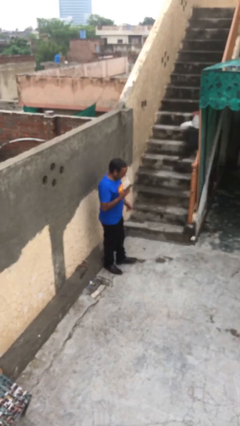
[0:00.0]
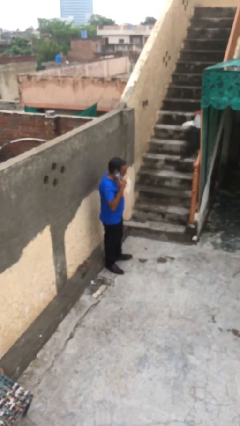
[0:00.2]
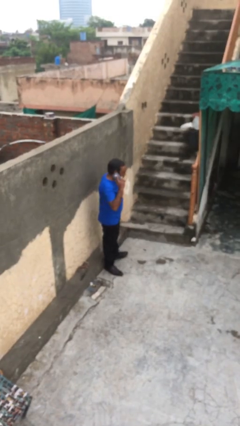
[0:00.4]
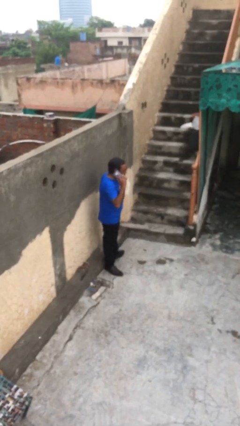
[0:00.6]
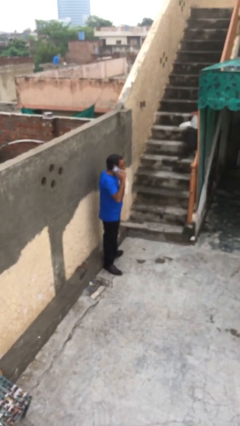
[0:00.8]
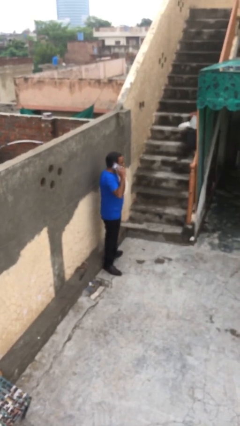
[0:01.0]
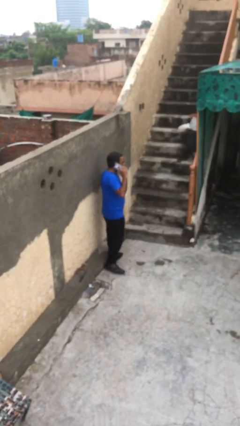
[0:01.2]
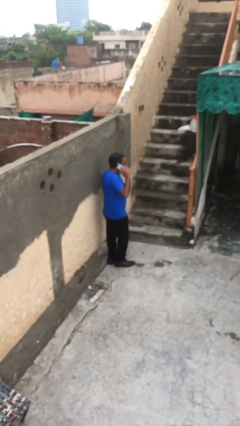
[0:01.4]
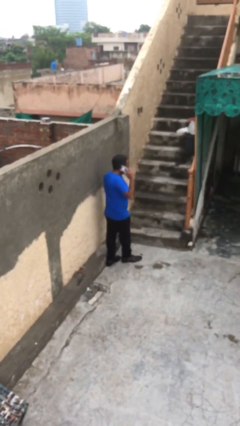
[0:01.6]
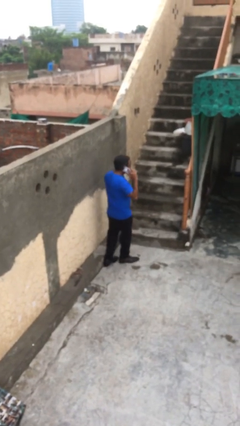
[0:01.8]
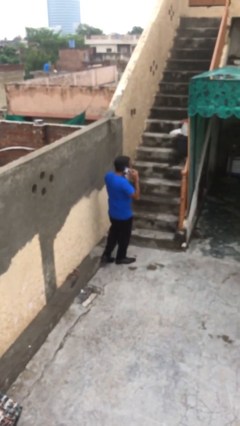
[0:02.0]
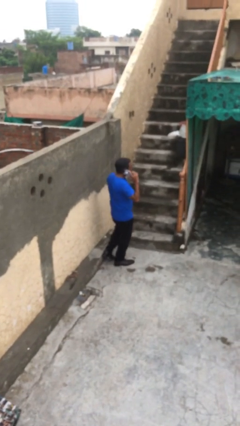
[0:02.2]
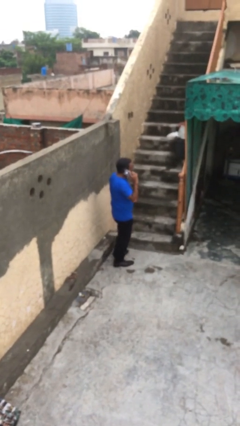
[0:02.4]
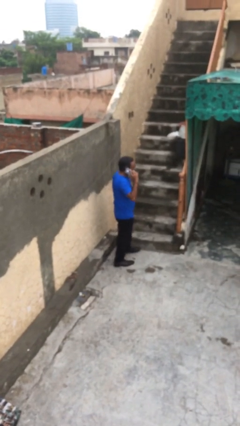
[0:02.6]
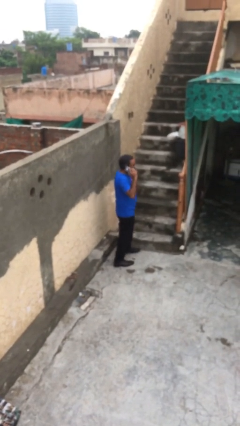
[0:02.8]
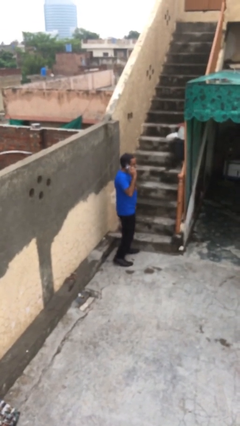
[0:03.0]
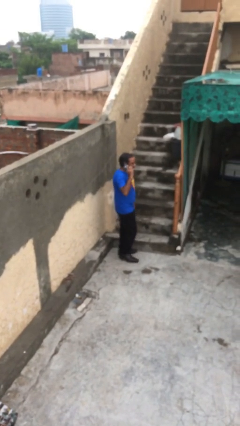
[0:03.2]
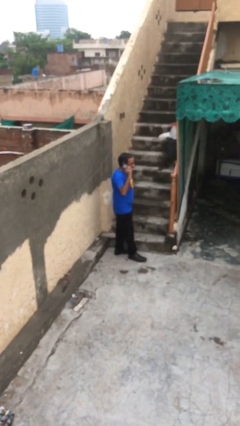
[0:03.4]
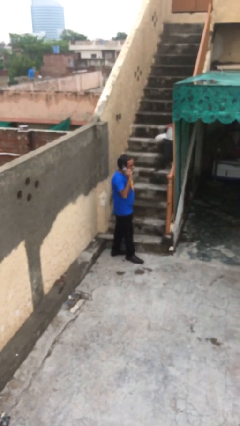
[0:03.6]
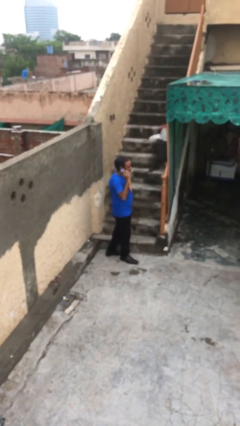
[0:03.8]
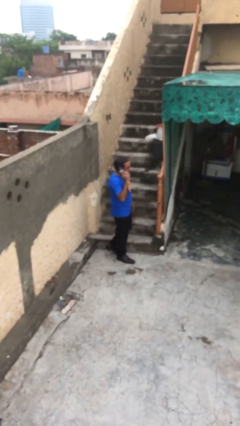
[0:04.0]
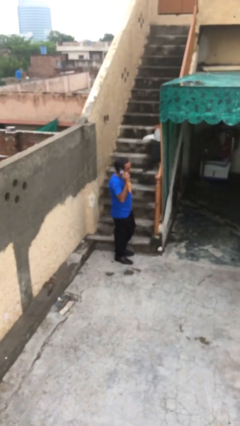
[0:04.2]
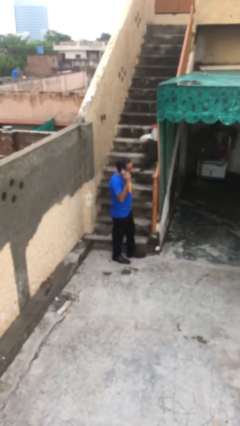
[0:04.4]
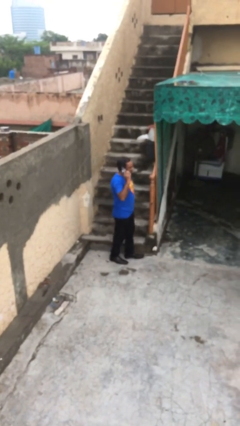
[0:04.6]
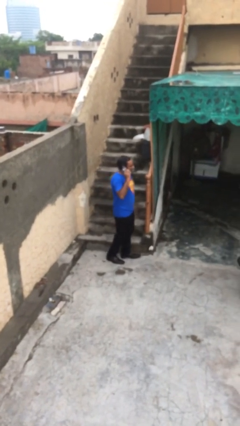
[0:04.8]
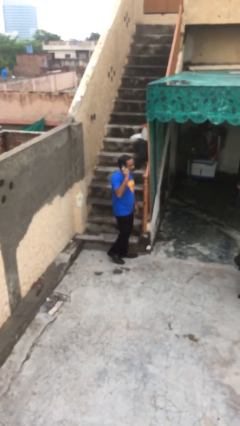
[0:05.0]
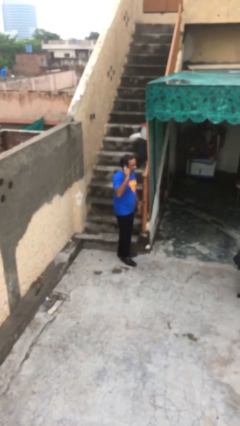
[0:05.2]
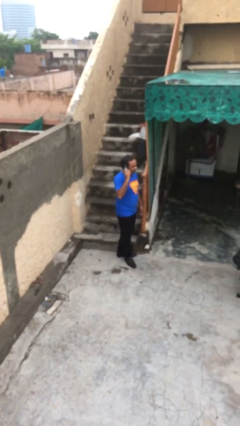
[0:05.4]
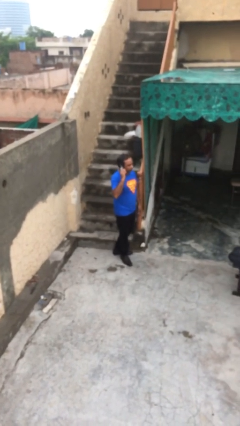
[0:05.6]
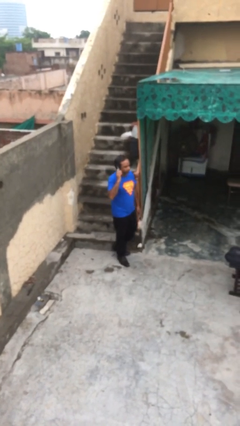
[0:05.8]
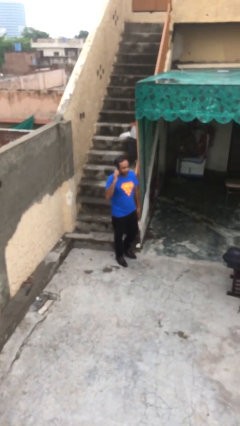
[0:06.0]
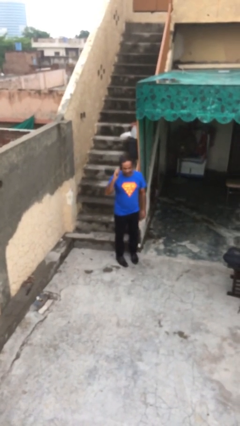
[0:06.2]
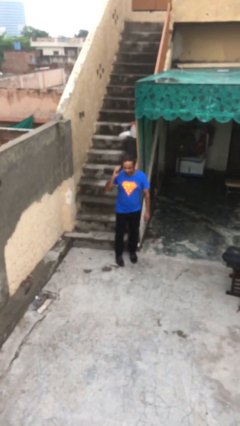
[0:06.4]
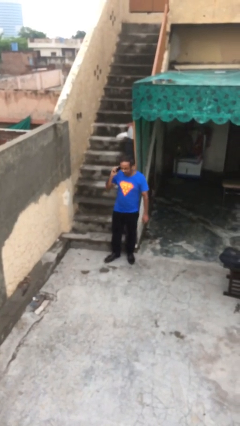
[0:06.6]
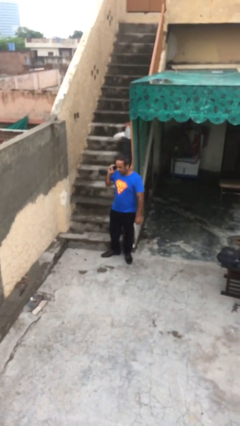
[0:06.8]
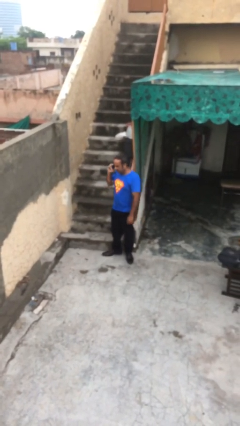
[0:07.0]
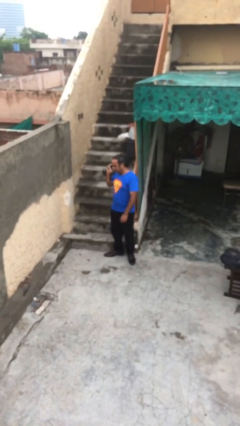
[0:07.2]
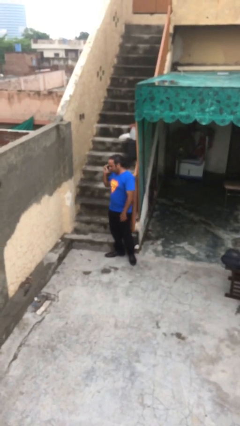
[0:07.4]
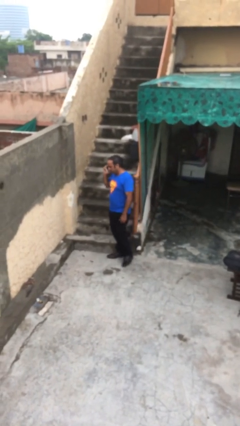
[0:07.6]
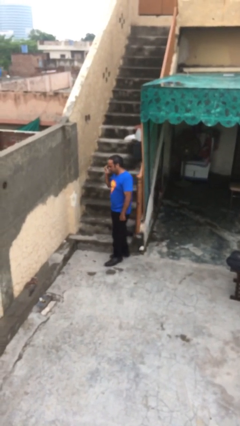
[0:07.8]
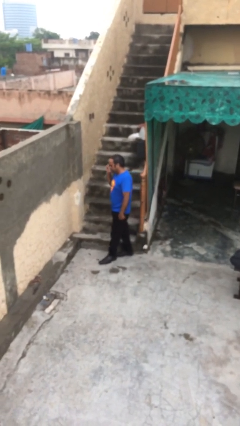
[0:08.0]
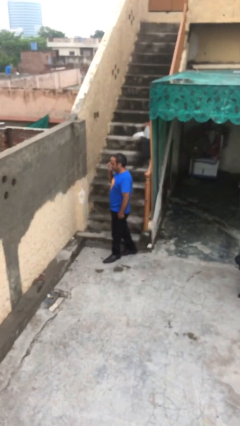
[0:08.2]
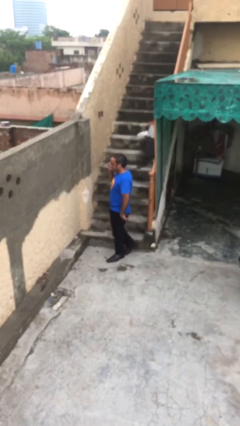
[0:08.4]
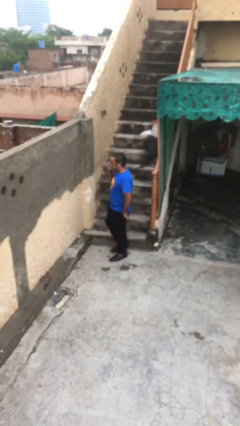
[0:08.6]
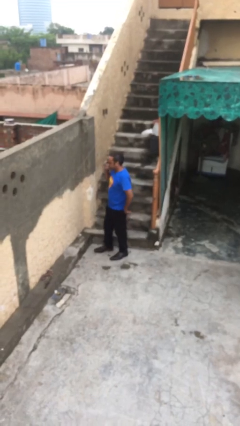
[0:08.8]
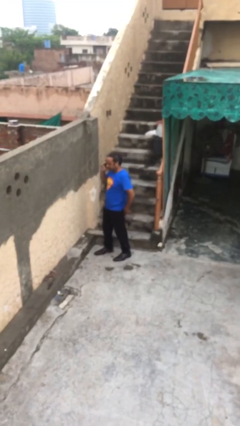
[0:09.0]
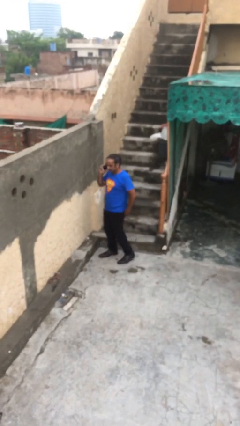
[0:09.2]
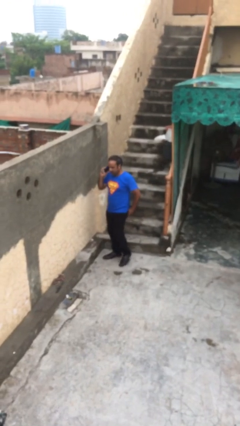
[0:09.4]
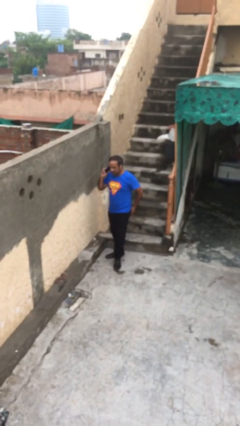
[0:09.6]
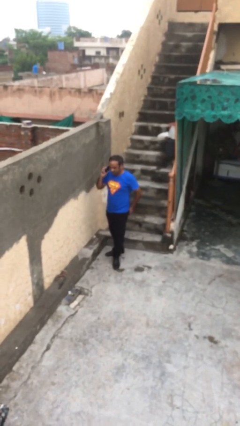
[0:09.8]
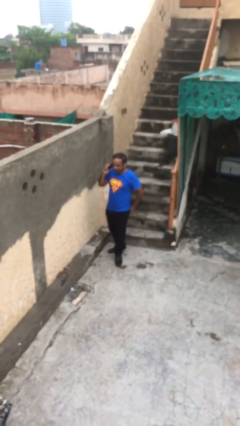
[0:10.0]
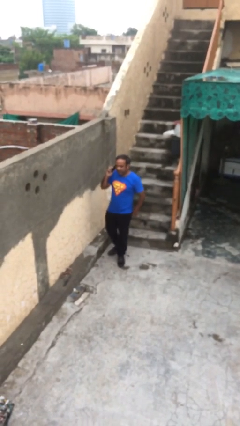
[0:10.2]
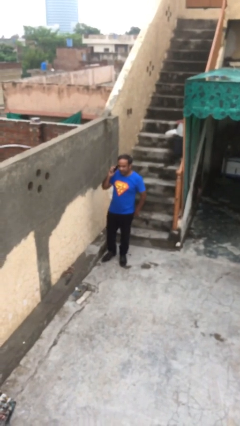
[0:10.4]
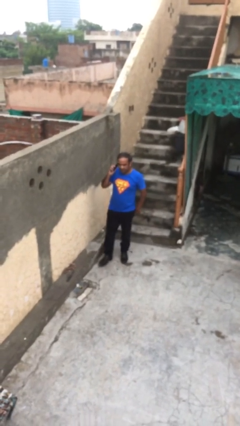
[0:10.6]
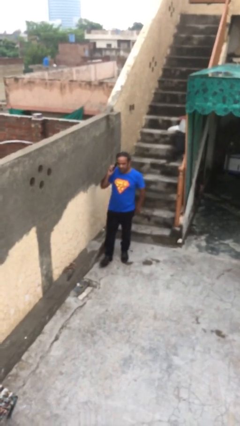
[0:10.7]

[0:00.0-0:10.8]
person talks on phone

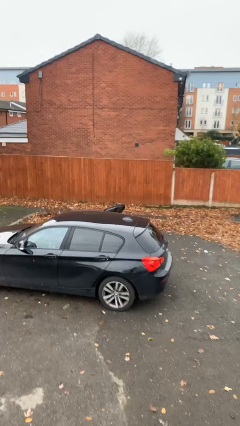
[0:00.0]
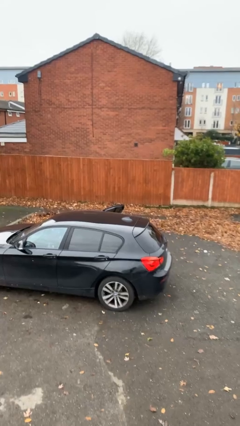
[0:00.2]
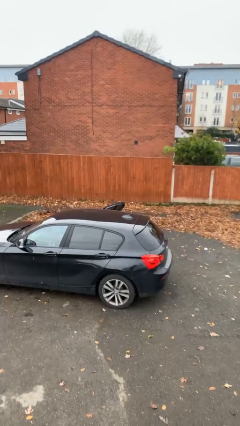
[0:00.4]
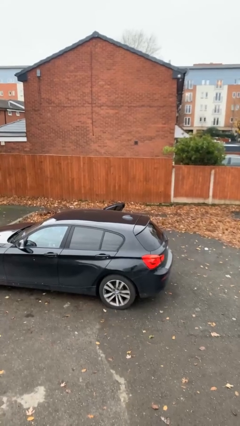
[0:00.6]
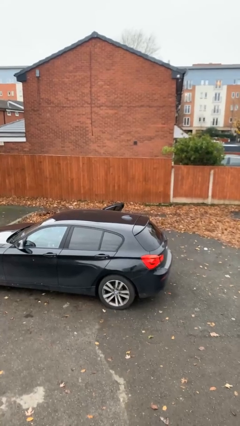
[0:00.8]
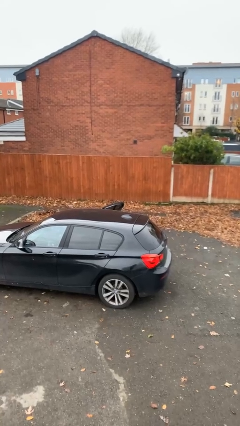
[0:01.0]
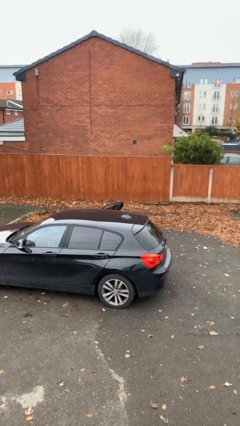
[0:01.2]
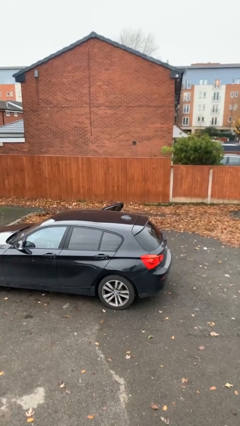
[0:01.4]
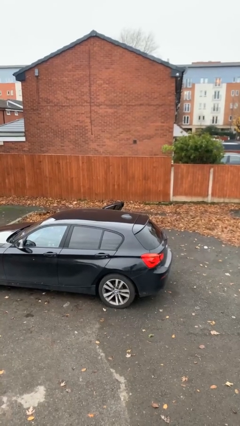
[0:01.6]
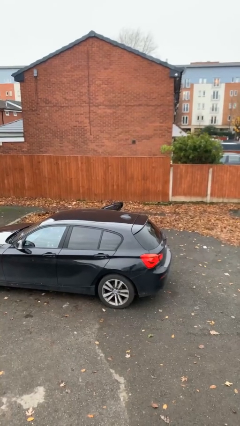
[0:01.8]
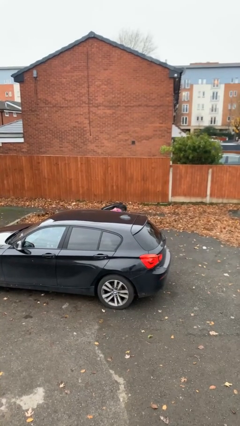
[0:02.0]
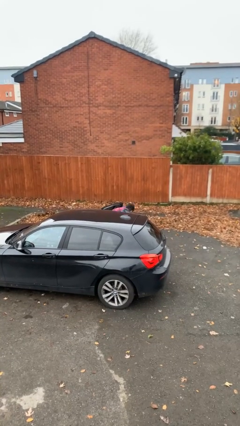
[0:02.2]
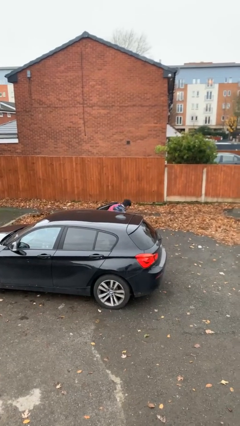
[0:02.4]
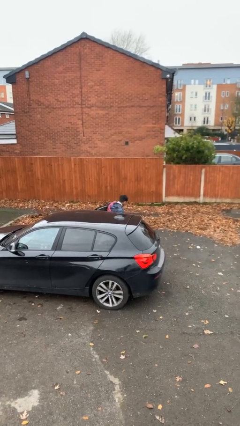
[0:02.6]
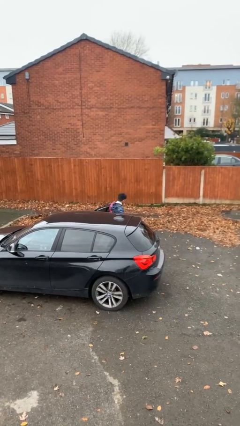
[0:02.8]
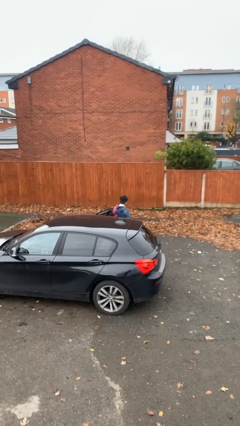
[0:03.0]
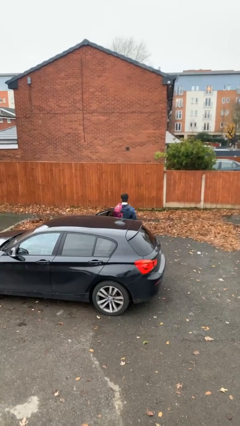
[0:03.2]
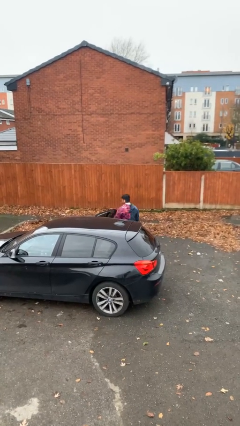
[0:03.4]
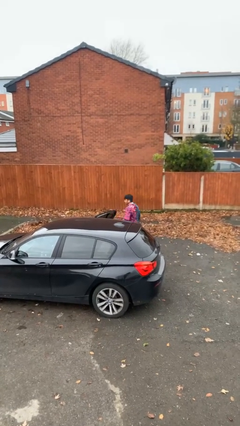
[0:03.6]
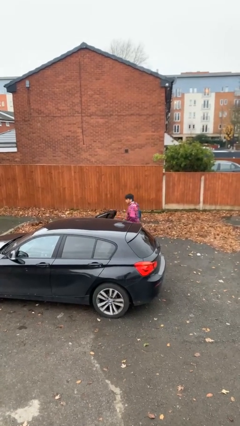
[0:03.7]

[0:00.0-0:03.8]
person exits car

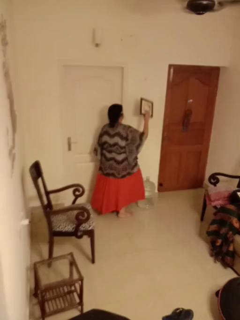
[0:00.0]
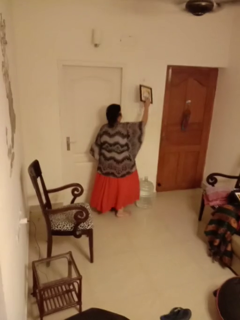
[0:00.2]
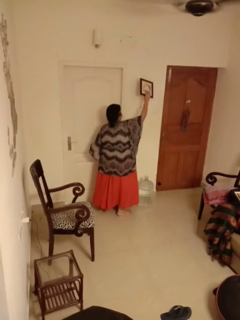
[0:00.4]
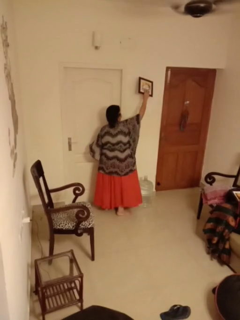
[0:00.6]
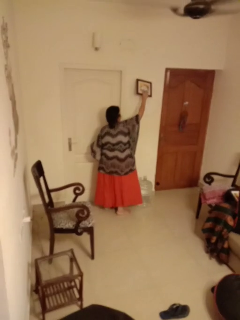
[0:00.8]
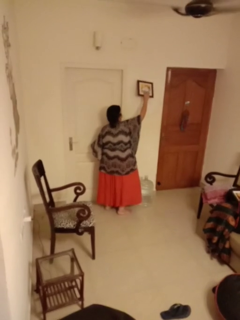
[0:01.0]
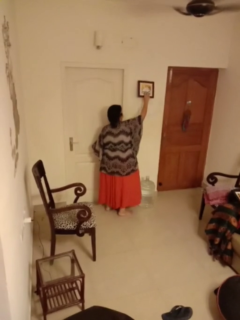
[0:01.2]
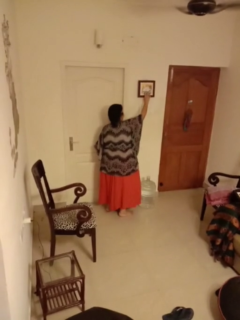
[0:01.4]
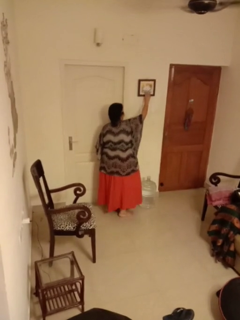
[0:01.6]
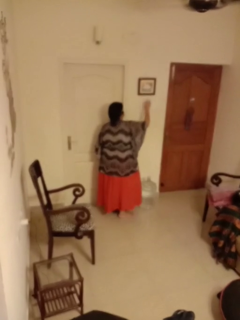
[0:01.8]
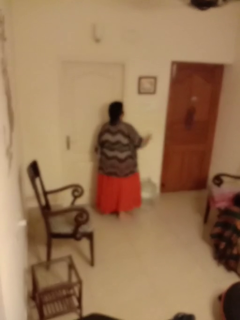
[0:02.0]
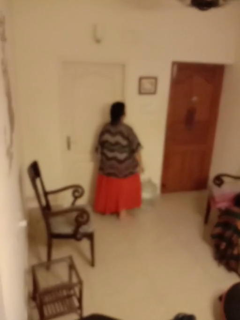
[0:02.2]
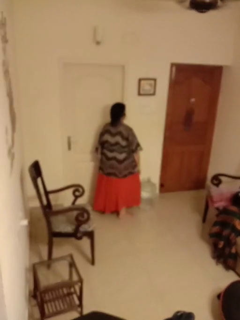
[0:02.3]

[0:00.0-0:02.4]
person puts up picture frame

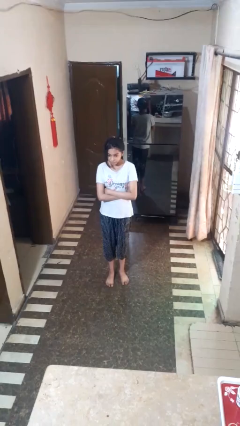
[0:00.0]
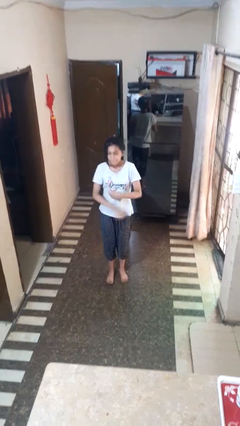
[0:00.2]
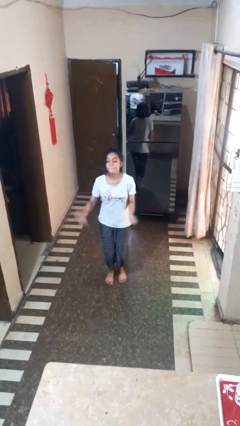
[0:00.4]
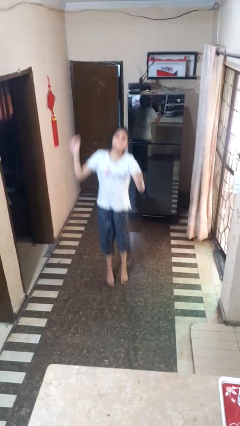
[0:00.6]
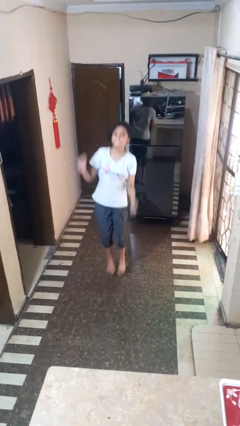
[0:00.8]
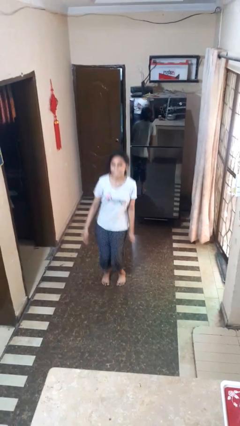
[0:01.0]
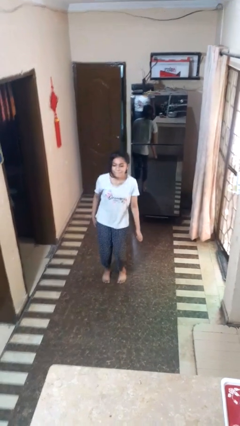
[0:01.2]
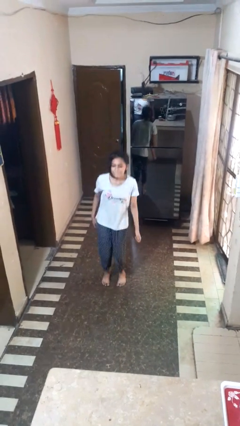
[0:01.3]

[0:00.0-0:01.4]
person jumps
